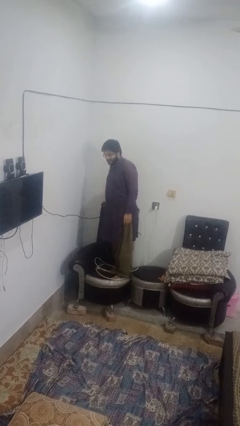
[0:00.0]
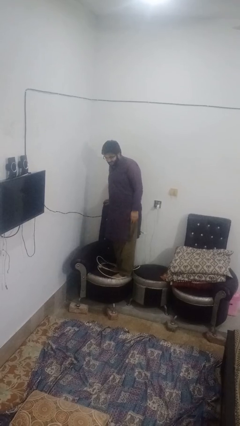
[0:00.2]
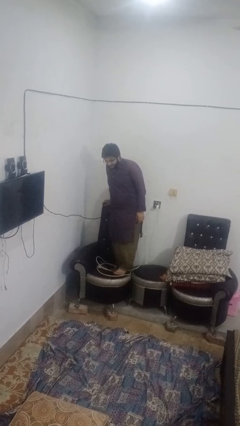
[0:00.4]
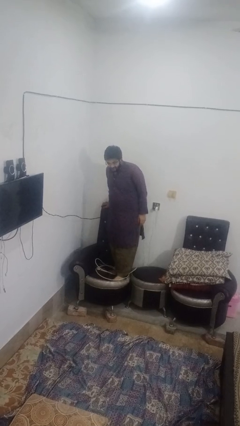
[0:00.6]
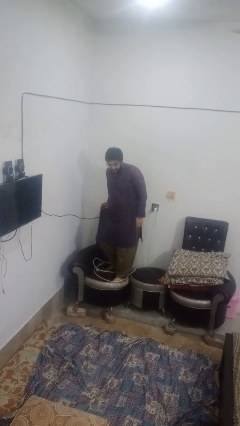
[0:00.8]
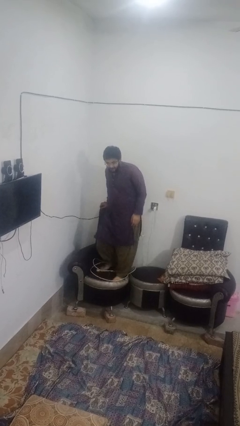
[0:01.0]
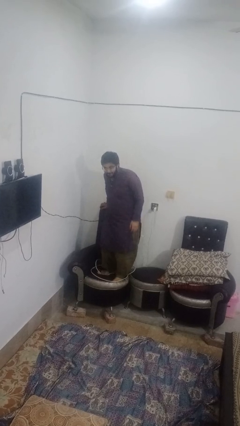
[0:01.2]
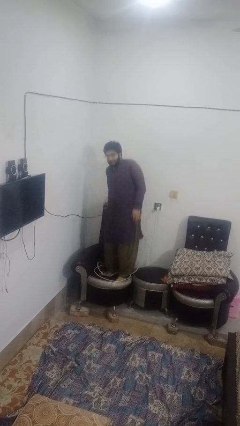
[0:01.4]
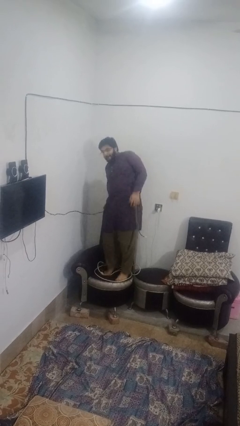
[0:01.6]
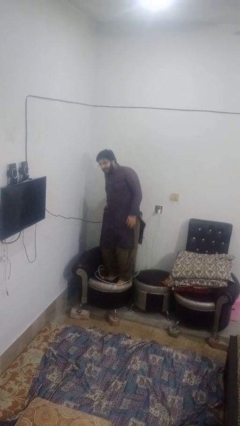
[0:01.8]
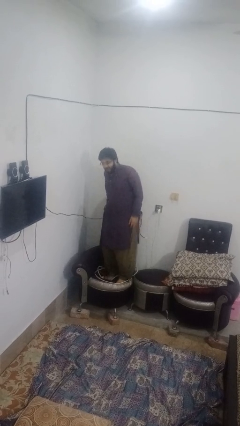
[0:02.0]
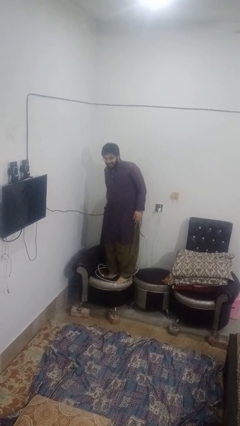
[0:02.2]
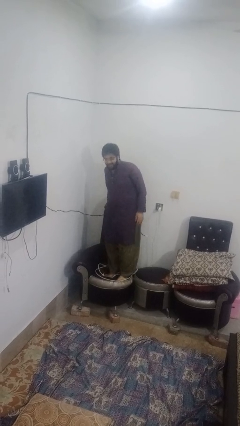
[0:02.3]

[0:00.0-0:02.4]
person jumps on couch

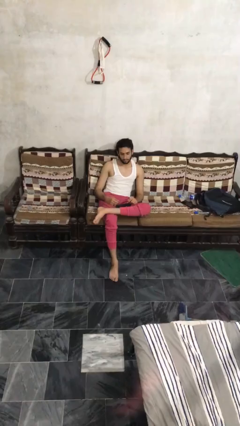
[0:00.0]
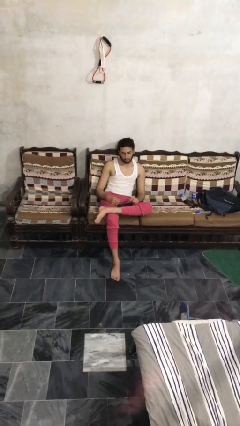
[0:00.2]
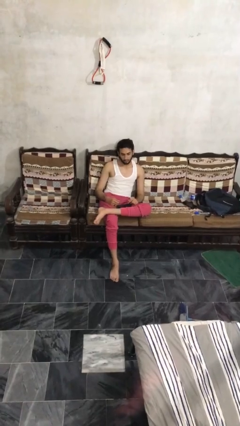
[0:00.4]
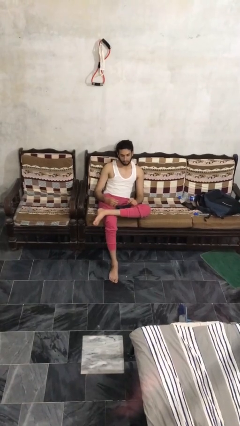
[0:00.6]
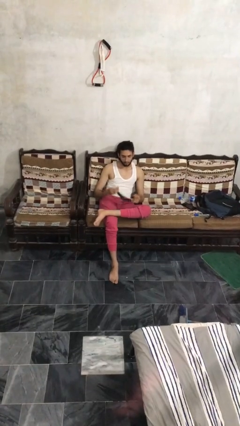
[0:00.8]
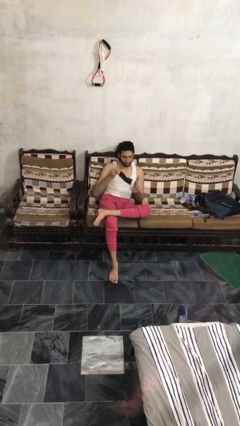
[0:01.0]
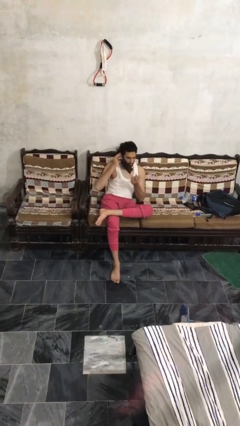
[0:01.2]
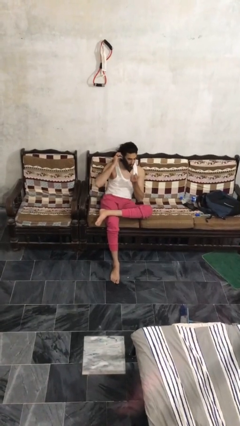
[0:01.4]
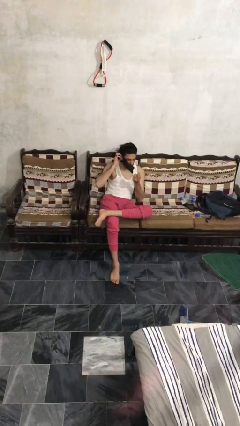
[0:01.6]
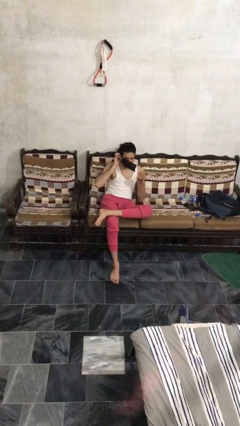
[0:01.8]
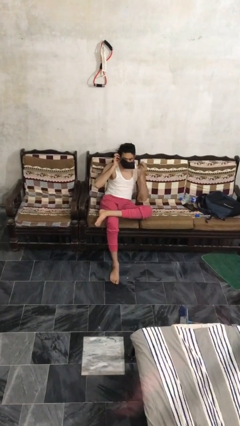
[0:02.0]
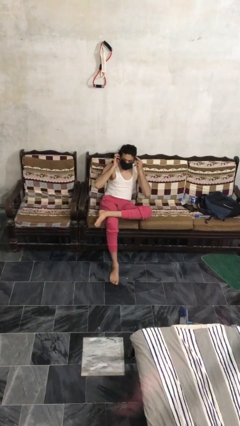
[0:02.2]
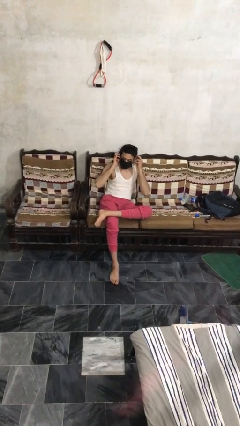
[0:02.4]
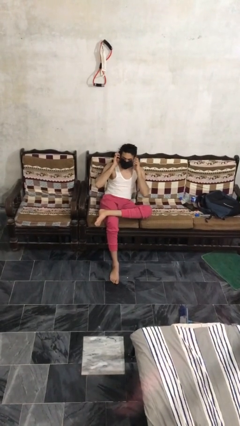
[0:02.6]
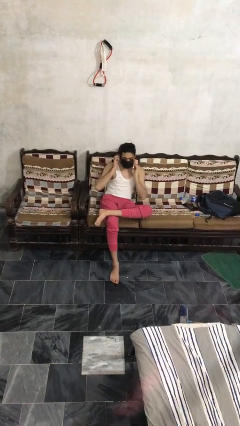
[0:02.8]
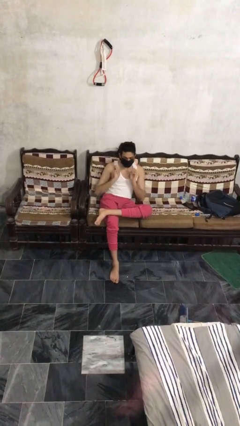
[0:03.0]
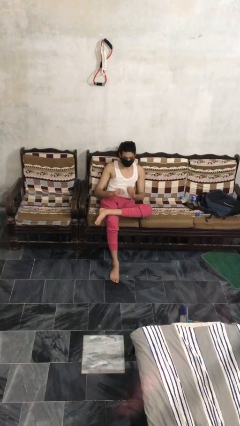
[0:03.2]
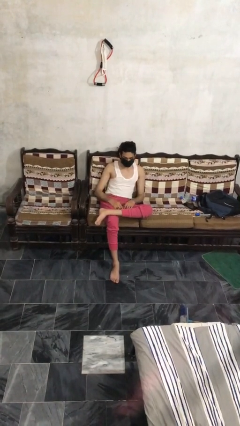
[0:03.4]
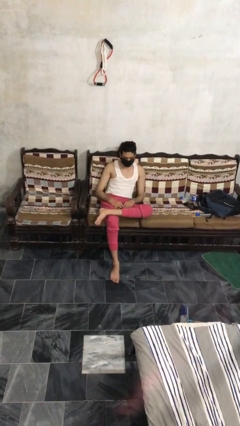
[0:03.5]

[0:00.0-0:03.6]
person puts on facemask

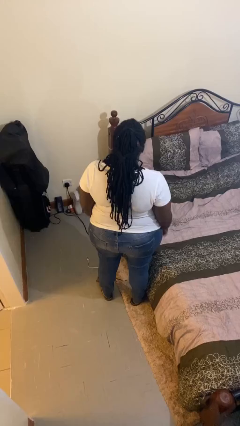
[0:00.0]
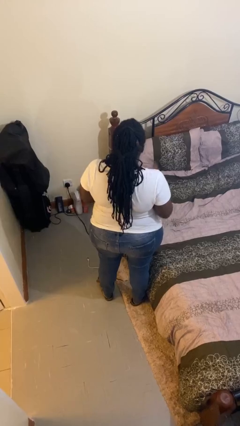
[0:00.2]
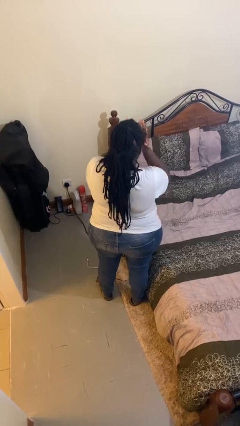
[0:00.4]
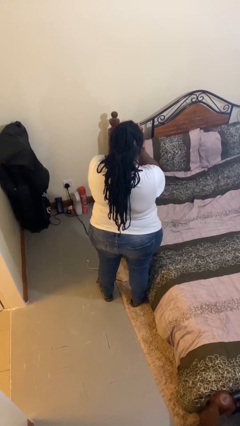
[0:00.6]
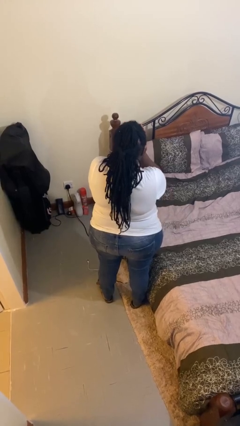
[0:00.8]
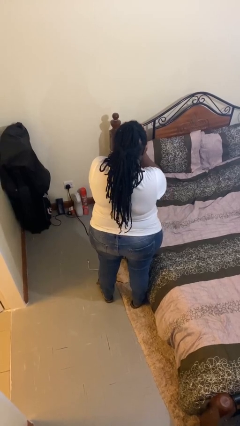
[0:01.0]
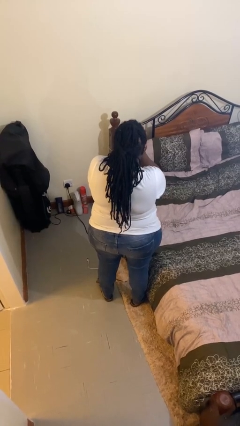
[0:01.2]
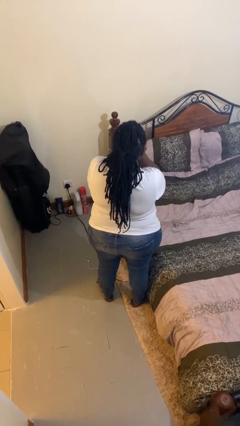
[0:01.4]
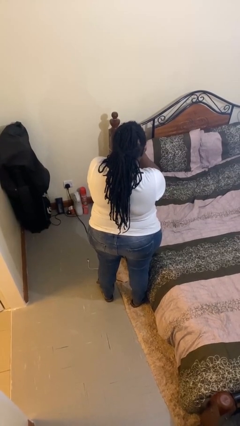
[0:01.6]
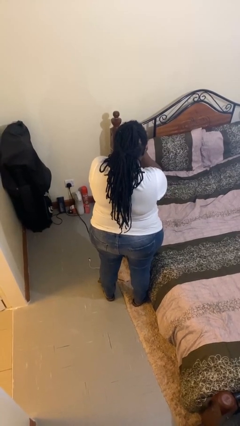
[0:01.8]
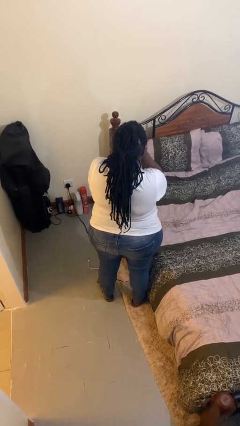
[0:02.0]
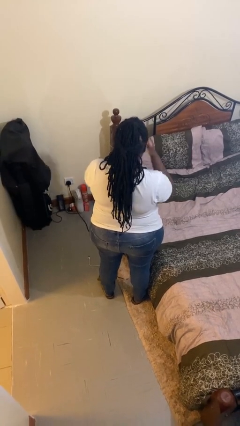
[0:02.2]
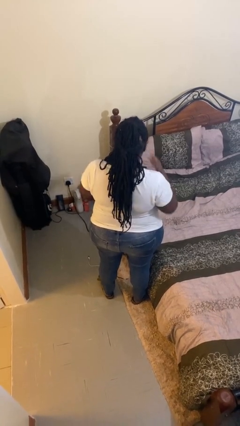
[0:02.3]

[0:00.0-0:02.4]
person covers face with hands

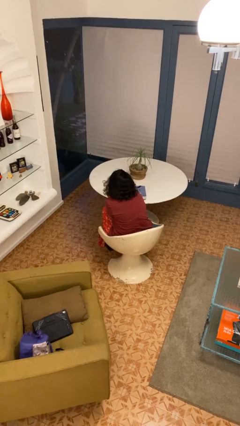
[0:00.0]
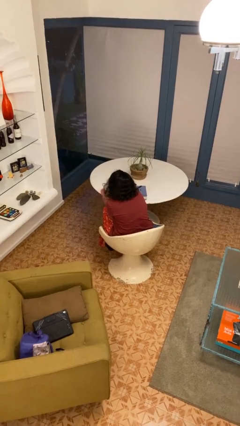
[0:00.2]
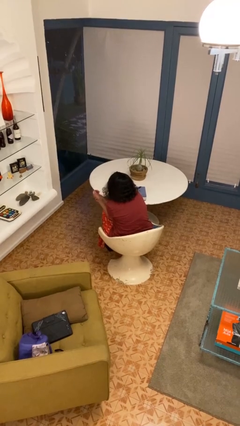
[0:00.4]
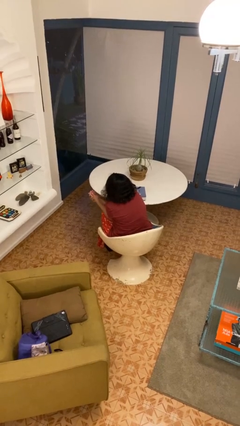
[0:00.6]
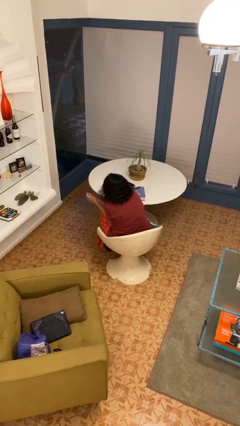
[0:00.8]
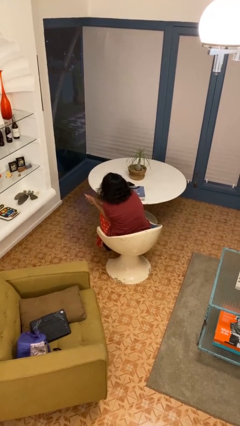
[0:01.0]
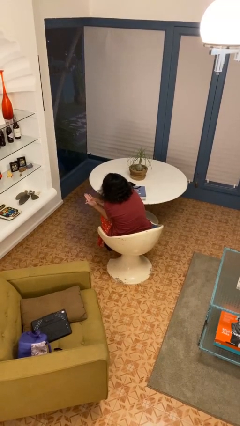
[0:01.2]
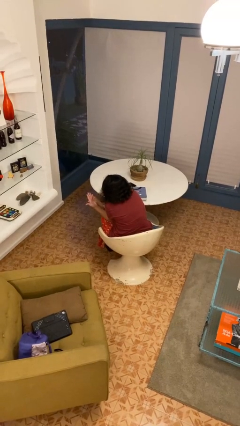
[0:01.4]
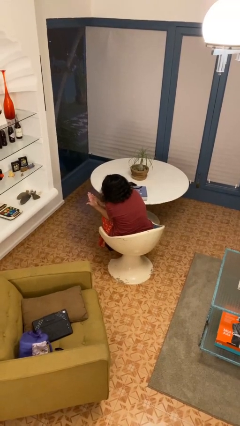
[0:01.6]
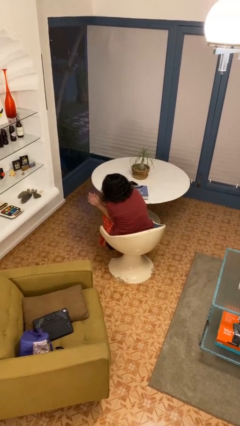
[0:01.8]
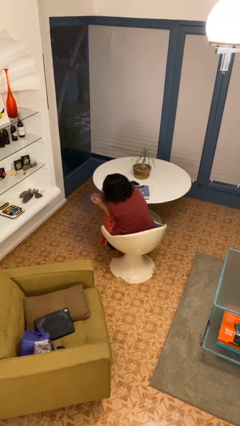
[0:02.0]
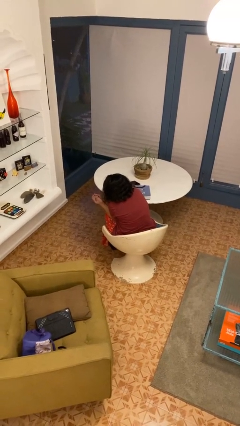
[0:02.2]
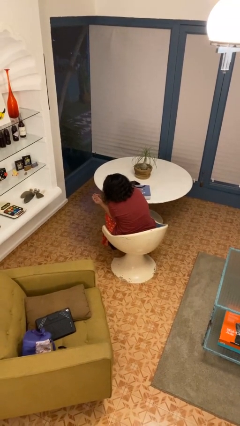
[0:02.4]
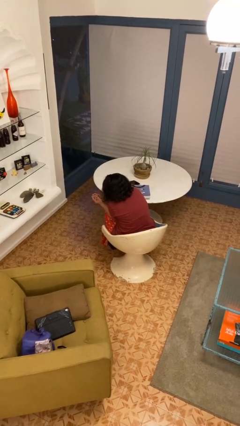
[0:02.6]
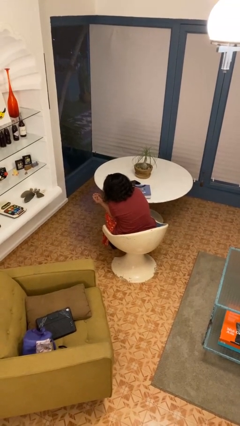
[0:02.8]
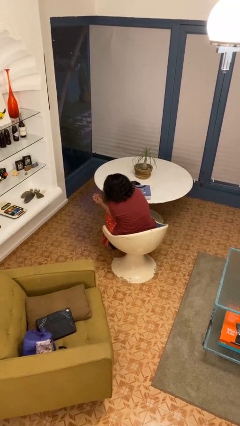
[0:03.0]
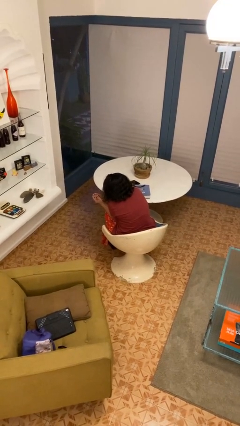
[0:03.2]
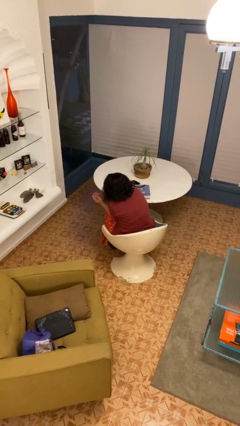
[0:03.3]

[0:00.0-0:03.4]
person looks at hands in lap

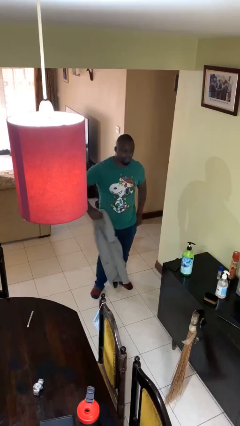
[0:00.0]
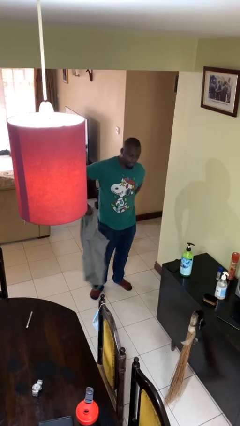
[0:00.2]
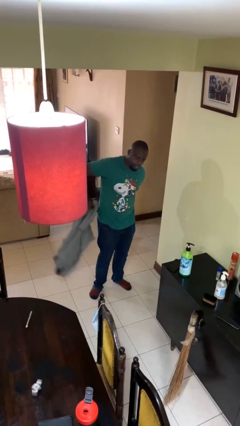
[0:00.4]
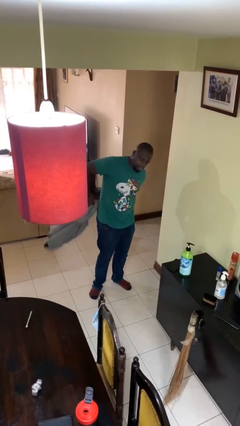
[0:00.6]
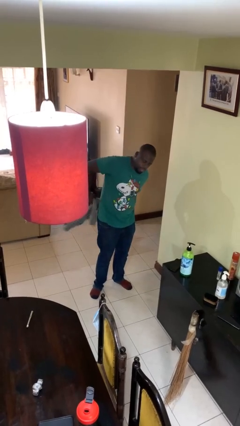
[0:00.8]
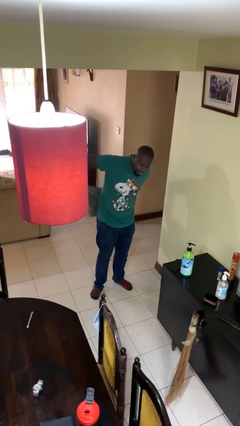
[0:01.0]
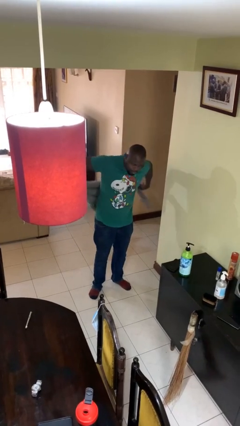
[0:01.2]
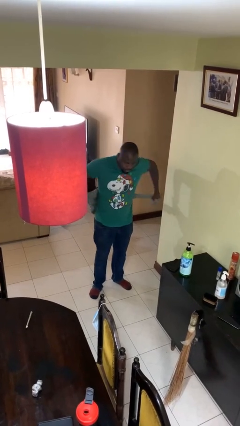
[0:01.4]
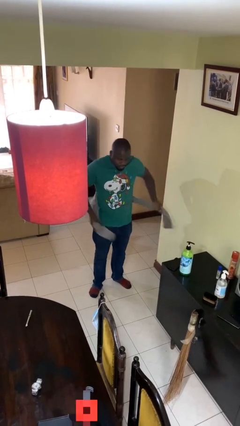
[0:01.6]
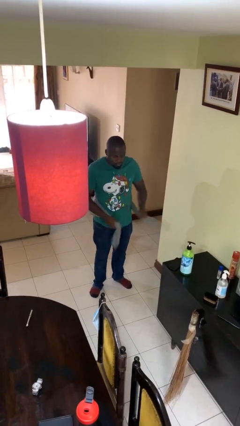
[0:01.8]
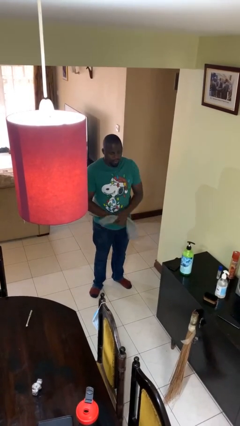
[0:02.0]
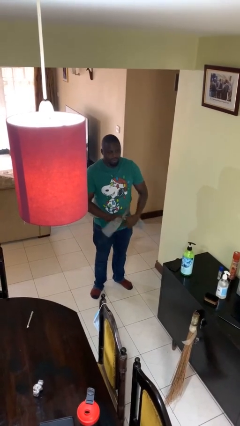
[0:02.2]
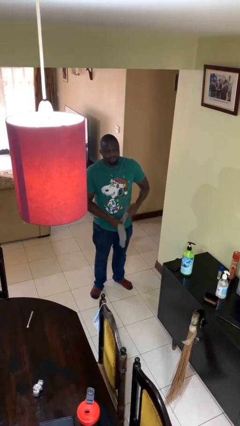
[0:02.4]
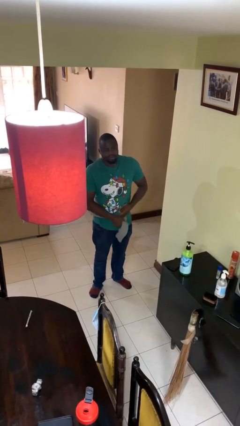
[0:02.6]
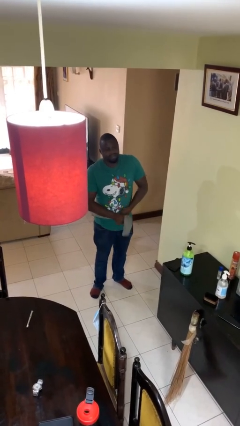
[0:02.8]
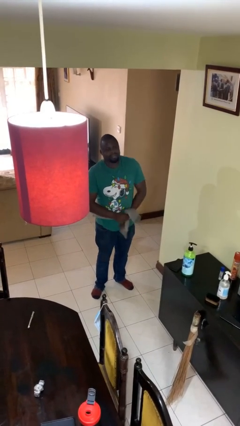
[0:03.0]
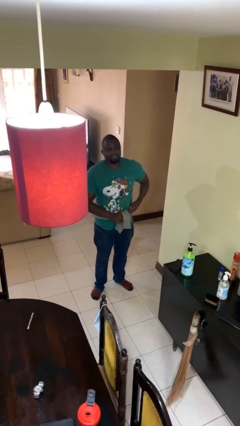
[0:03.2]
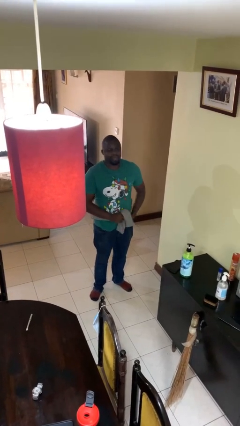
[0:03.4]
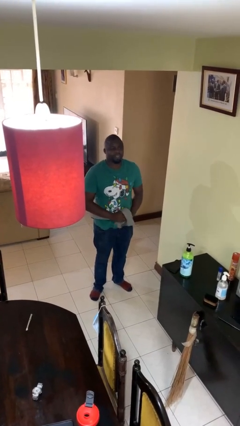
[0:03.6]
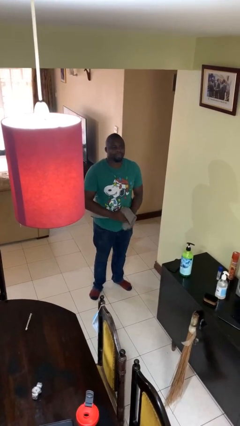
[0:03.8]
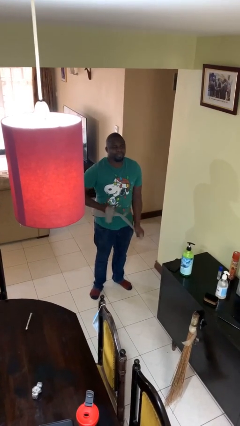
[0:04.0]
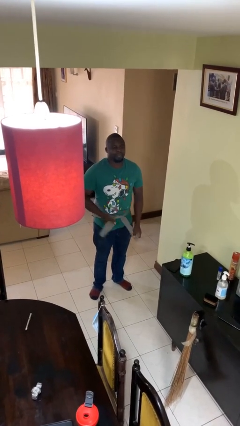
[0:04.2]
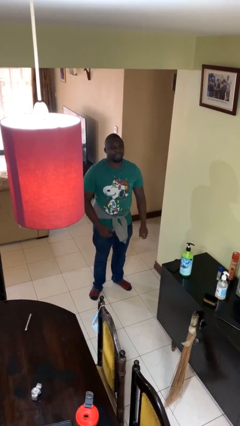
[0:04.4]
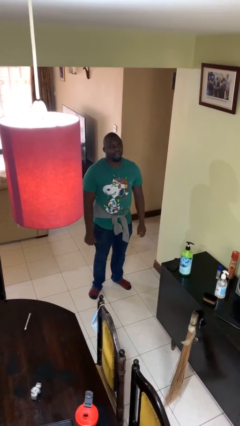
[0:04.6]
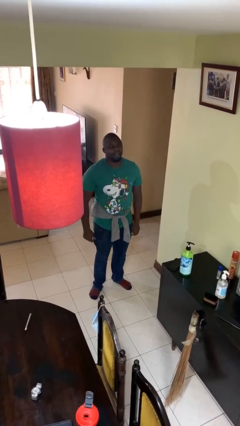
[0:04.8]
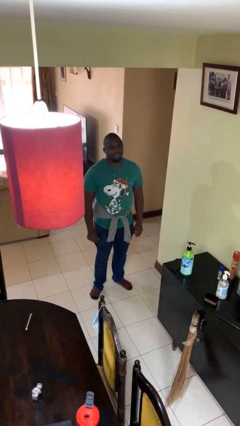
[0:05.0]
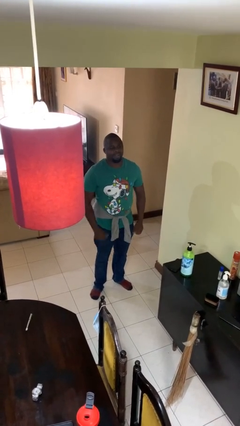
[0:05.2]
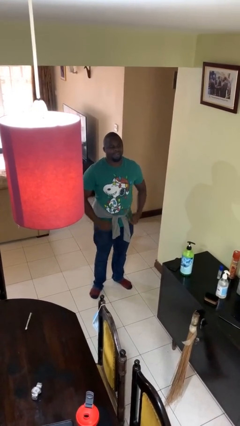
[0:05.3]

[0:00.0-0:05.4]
person ties jacket around waist

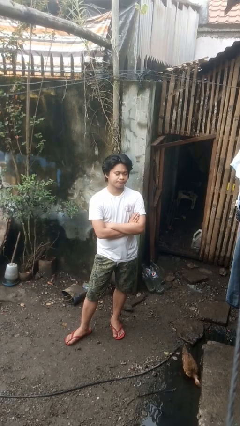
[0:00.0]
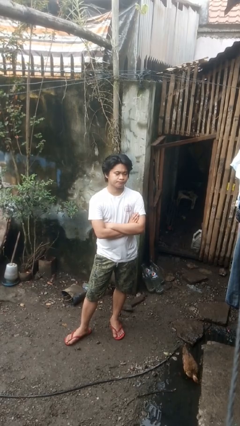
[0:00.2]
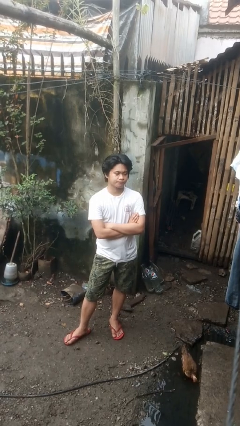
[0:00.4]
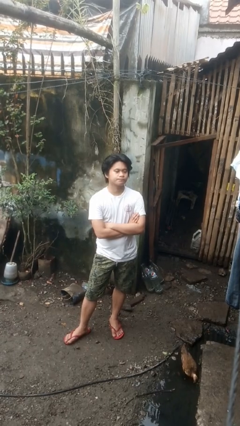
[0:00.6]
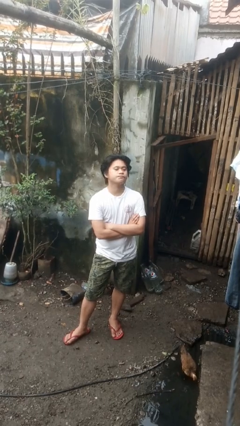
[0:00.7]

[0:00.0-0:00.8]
person nods head
